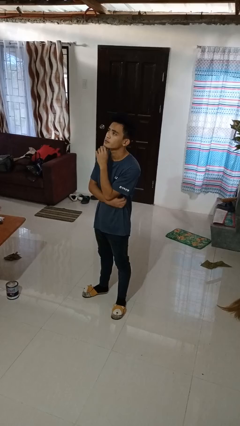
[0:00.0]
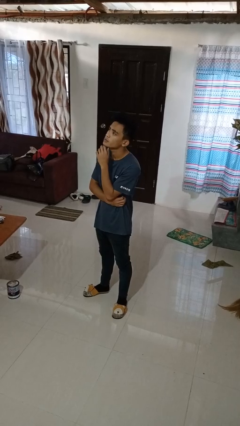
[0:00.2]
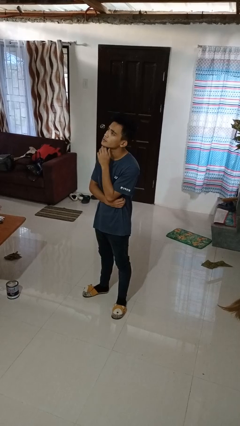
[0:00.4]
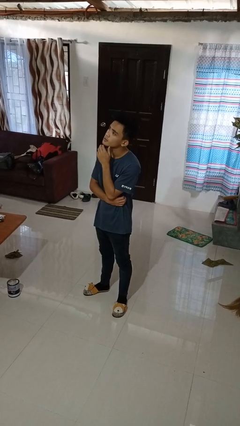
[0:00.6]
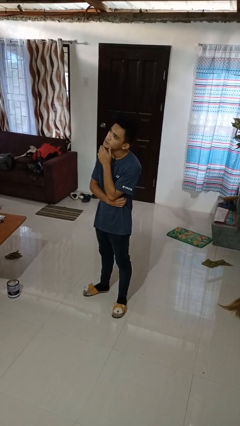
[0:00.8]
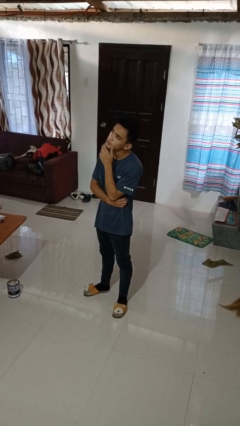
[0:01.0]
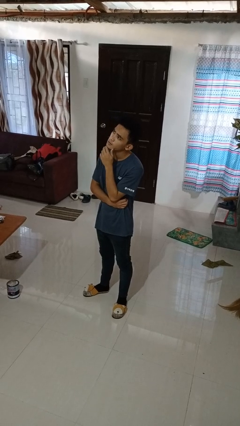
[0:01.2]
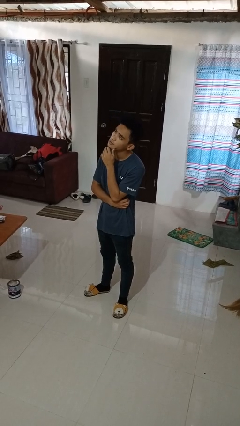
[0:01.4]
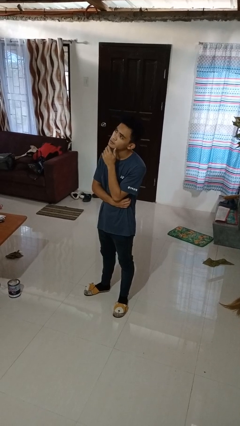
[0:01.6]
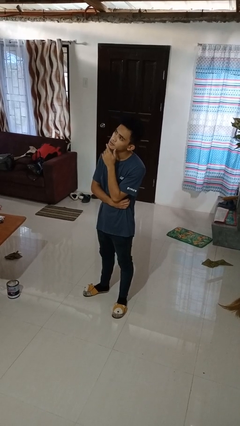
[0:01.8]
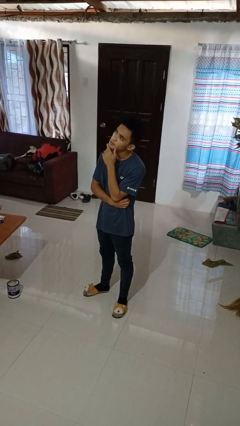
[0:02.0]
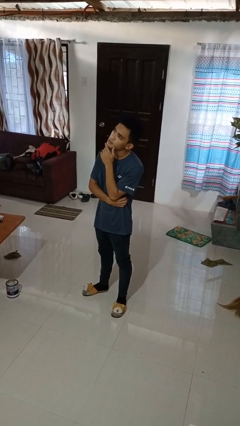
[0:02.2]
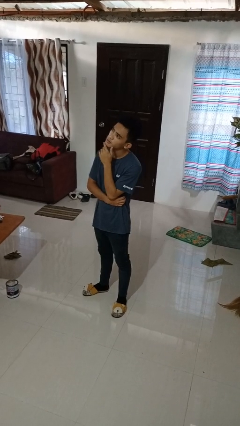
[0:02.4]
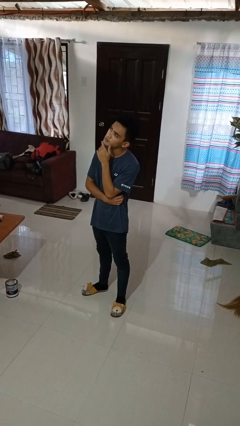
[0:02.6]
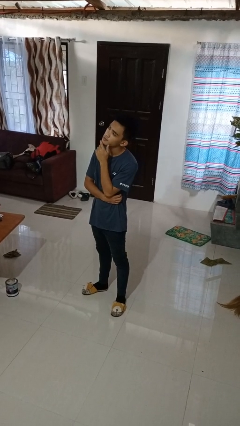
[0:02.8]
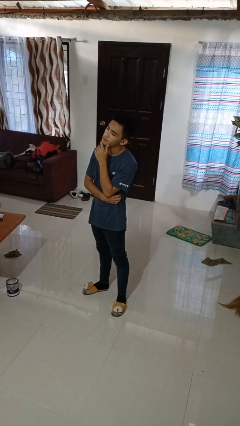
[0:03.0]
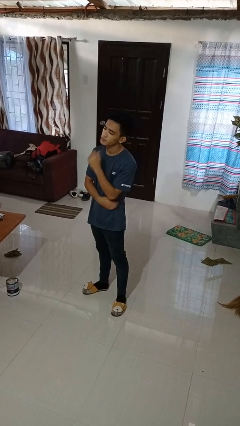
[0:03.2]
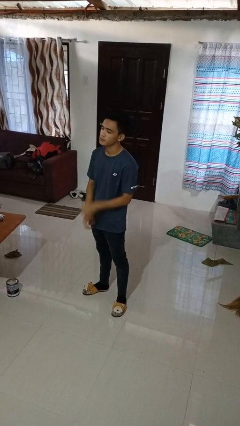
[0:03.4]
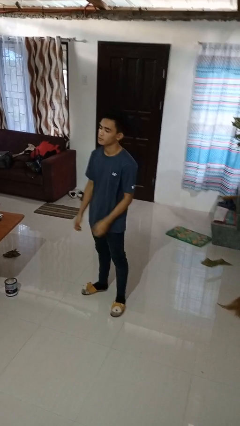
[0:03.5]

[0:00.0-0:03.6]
person strokes chin

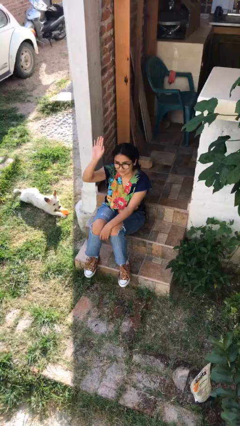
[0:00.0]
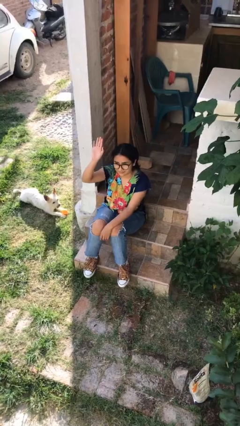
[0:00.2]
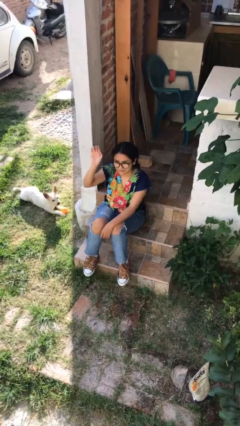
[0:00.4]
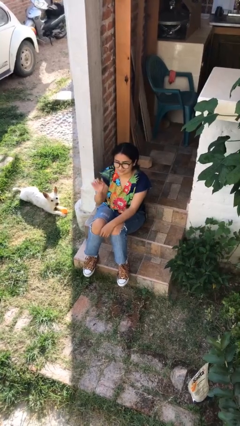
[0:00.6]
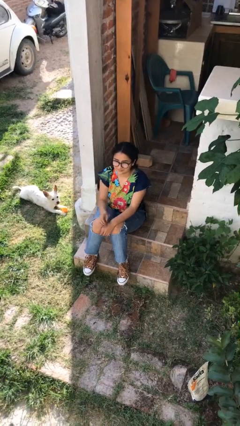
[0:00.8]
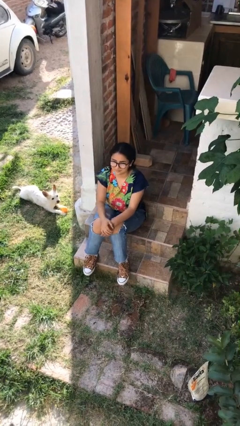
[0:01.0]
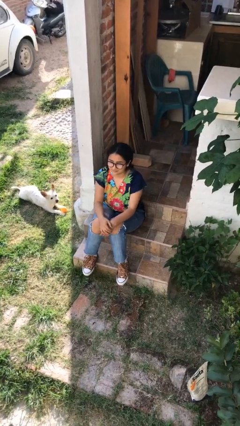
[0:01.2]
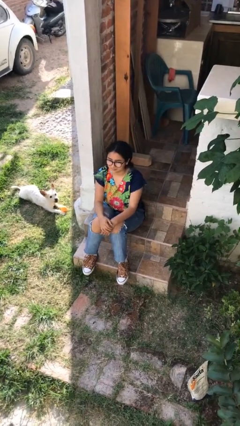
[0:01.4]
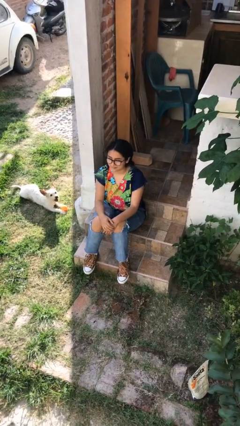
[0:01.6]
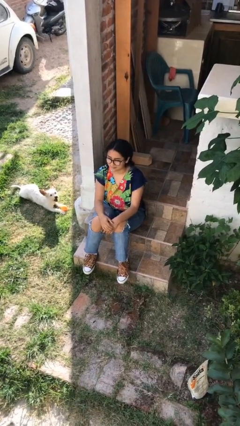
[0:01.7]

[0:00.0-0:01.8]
person gestures lower hand

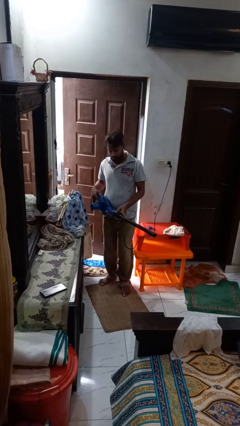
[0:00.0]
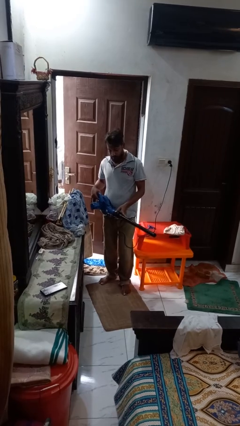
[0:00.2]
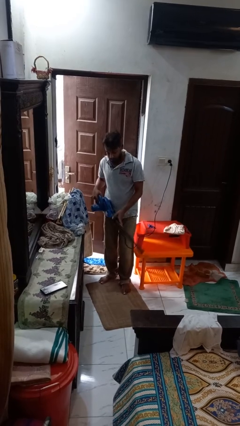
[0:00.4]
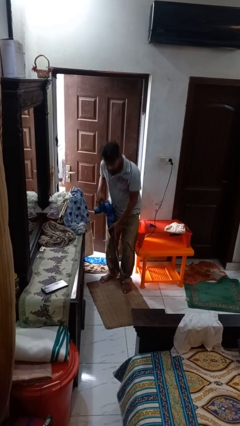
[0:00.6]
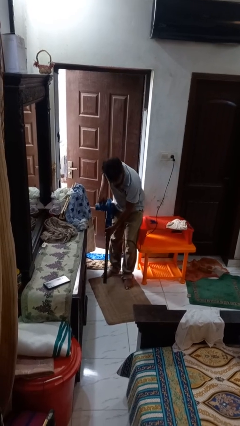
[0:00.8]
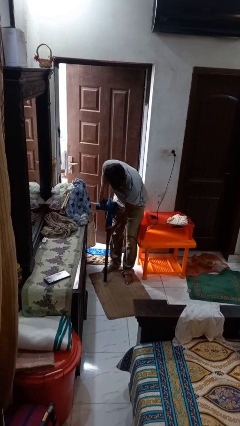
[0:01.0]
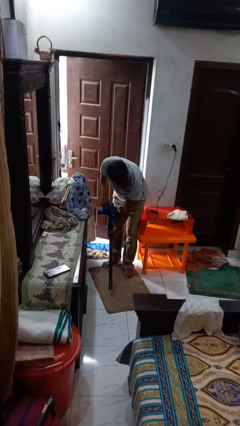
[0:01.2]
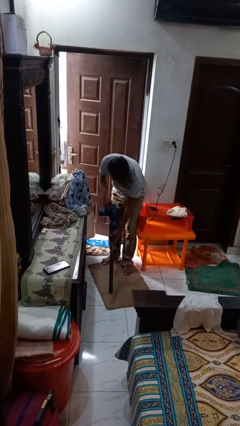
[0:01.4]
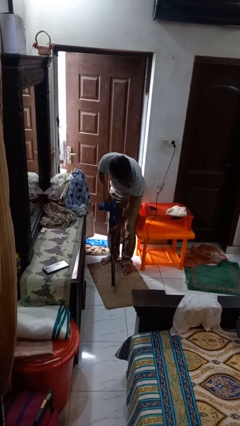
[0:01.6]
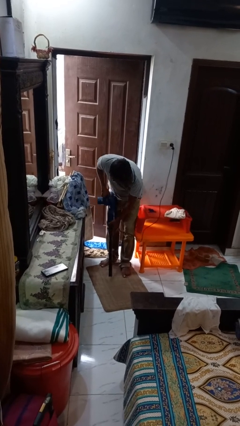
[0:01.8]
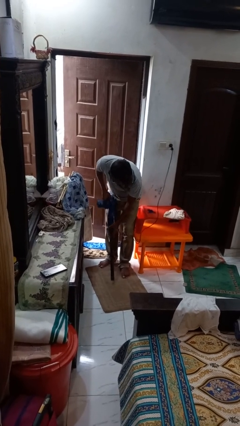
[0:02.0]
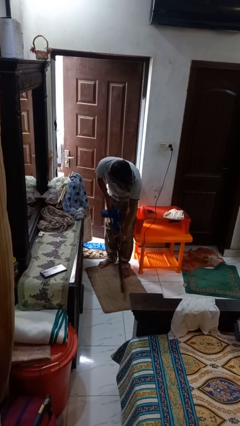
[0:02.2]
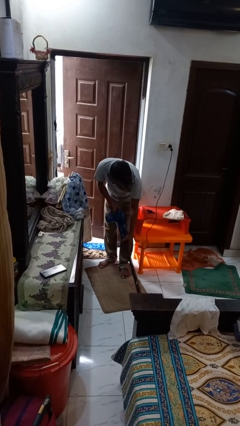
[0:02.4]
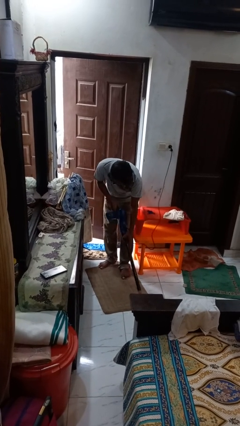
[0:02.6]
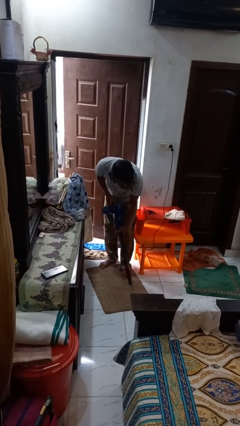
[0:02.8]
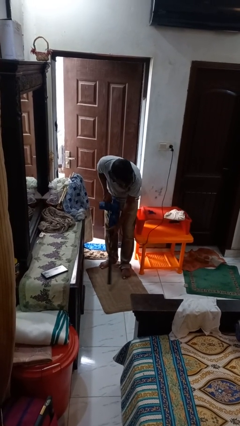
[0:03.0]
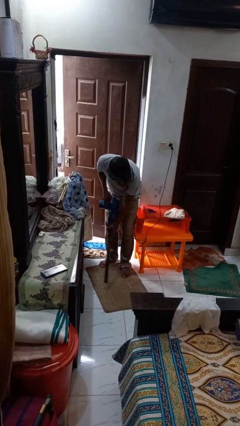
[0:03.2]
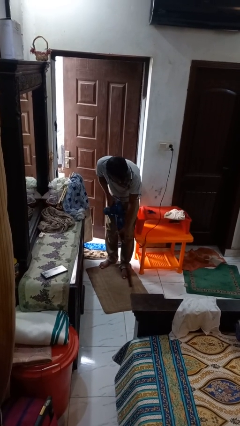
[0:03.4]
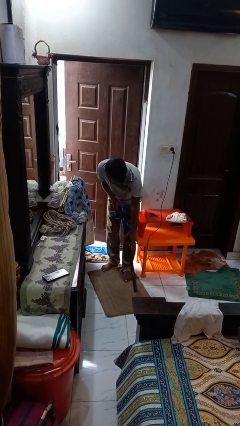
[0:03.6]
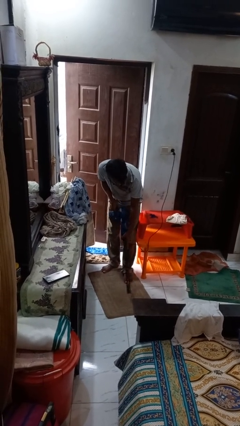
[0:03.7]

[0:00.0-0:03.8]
person vacuums carpet

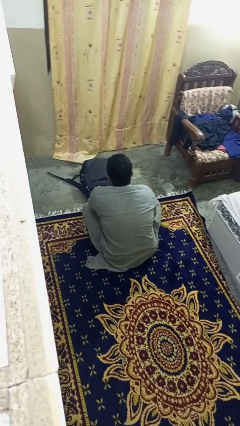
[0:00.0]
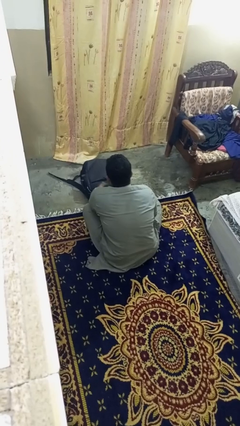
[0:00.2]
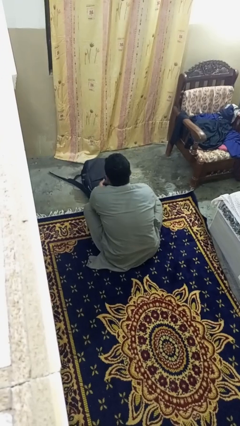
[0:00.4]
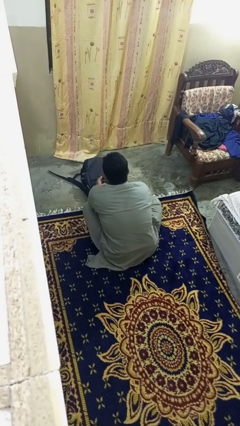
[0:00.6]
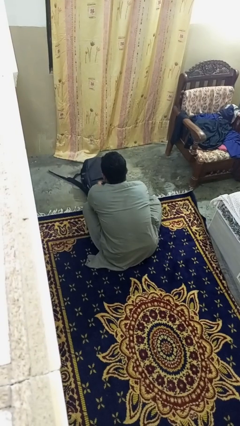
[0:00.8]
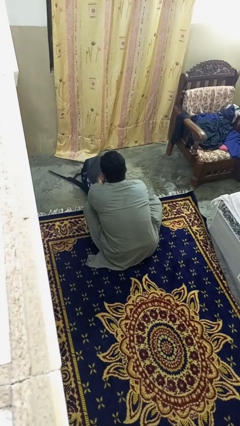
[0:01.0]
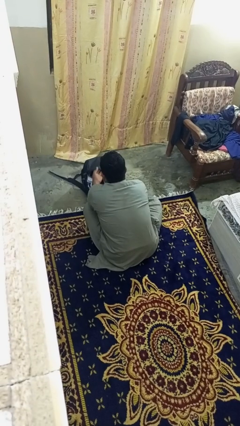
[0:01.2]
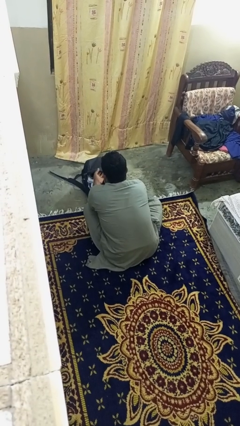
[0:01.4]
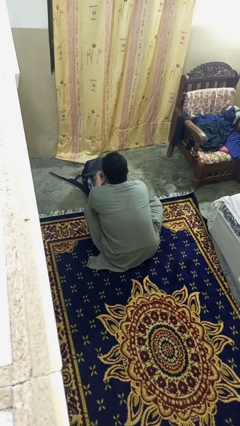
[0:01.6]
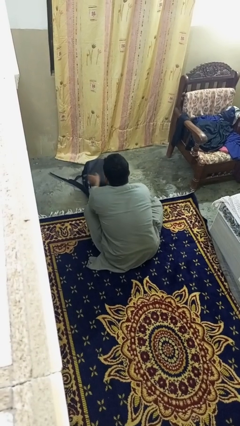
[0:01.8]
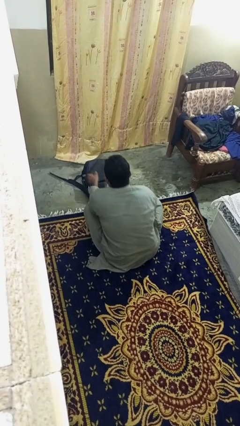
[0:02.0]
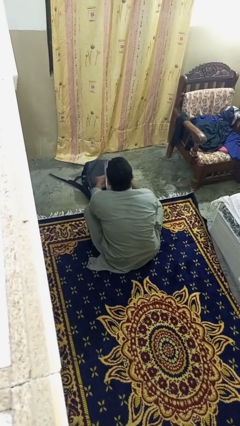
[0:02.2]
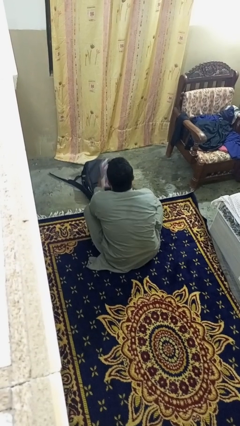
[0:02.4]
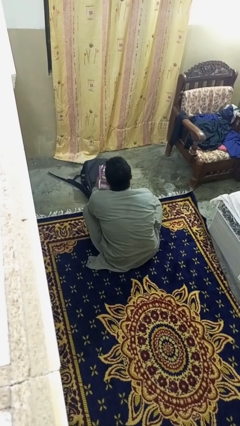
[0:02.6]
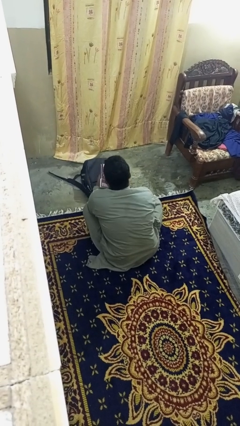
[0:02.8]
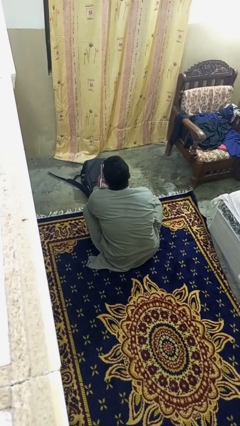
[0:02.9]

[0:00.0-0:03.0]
person takes object from bag

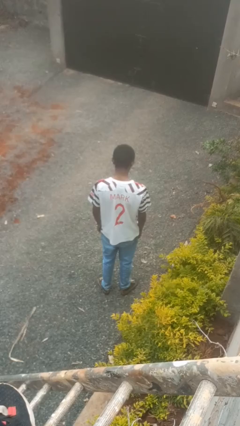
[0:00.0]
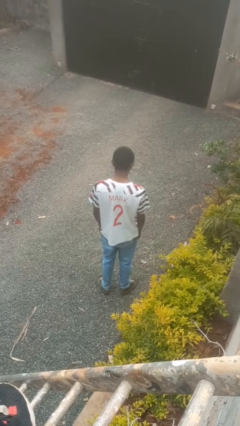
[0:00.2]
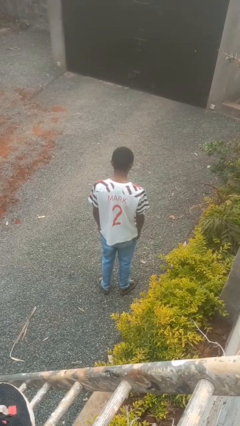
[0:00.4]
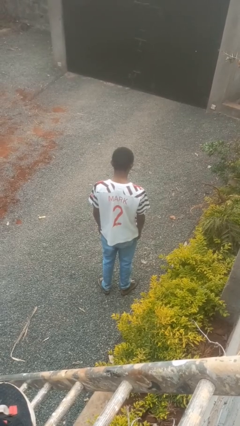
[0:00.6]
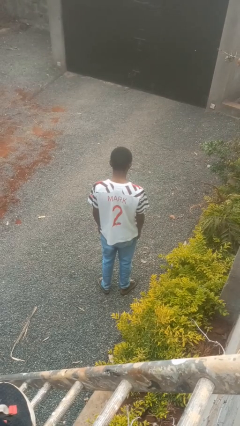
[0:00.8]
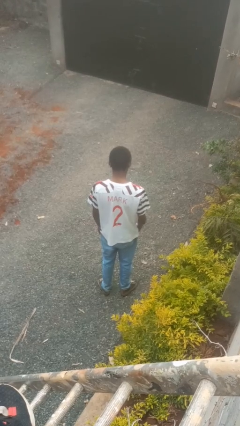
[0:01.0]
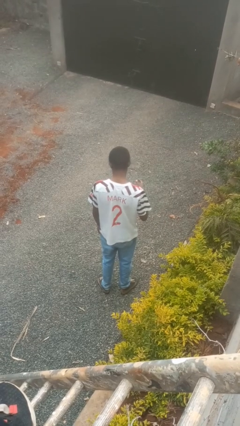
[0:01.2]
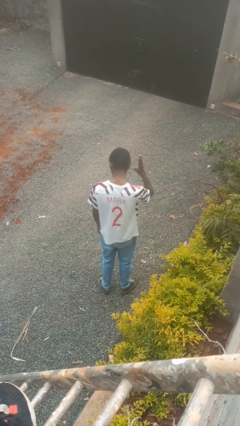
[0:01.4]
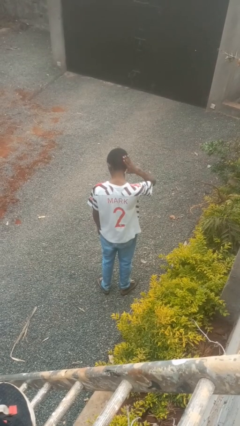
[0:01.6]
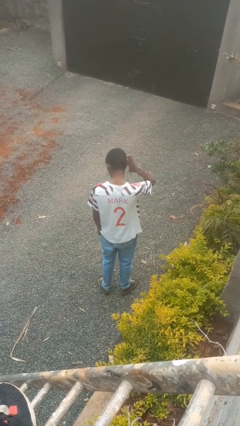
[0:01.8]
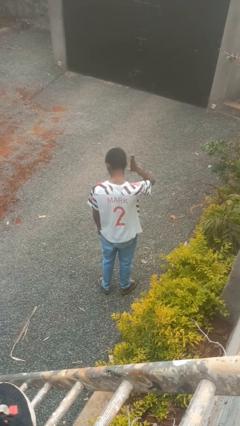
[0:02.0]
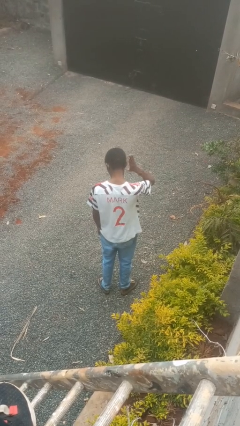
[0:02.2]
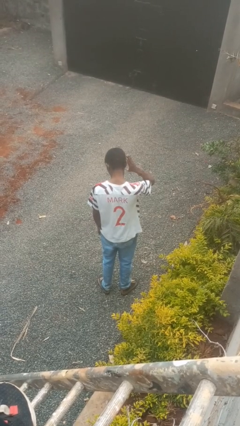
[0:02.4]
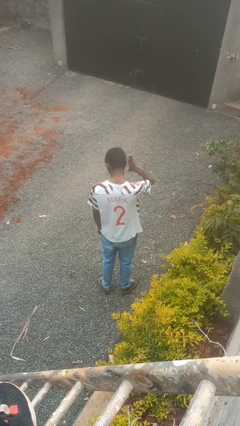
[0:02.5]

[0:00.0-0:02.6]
person pats head

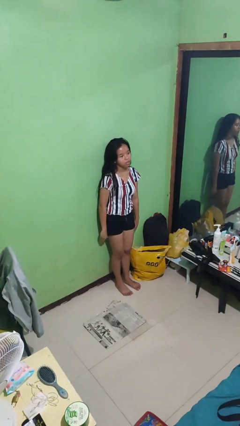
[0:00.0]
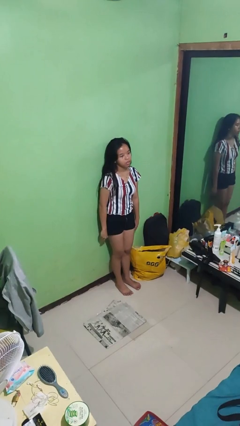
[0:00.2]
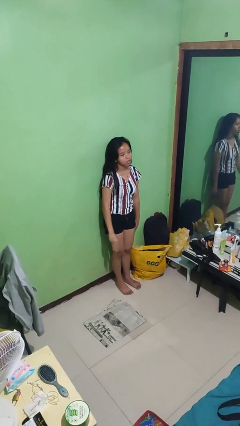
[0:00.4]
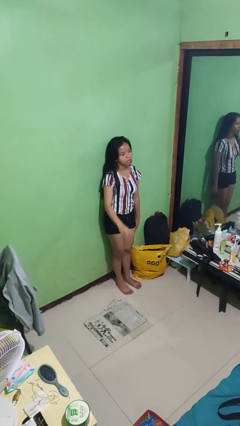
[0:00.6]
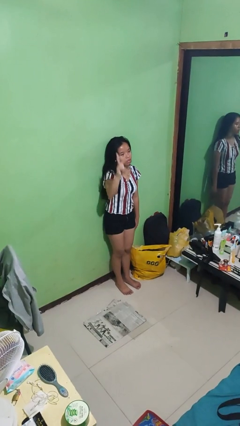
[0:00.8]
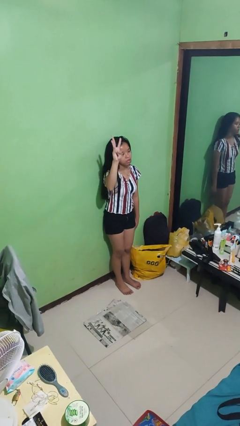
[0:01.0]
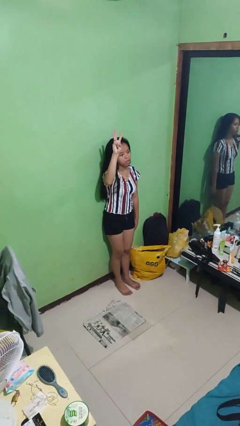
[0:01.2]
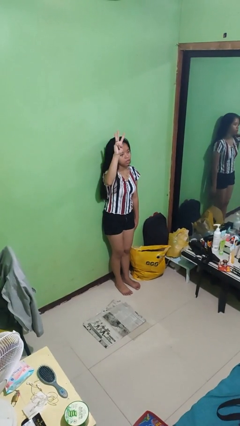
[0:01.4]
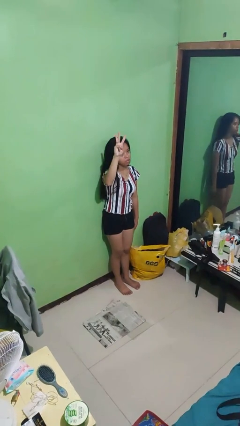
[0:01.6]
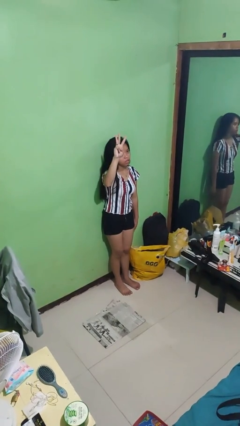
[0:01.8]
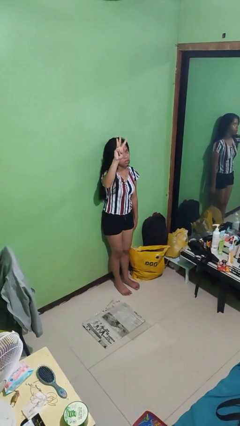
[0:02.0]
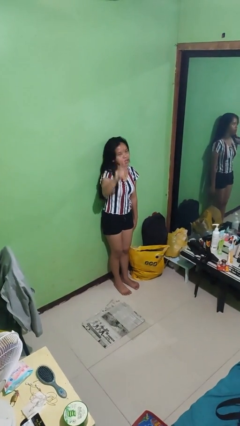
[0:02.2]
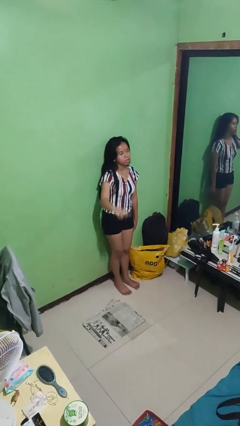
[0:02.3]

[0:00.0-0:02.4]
person gestures number three
